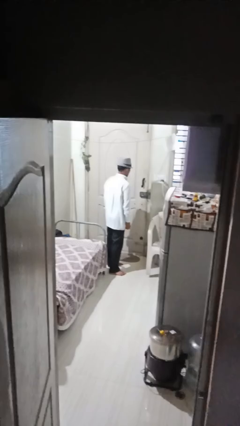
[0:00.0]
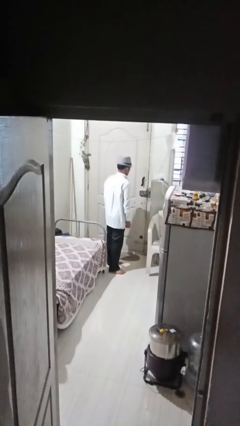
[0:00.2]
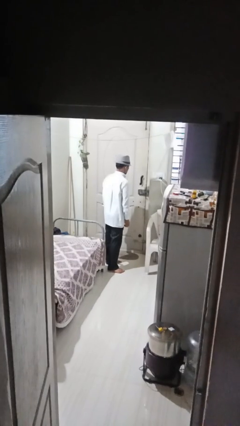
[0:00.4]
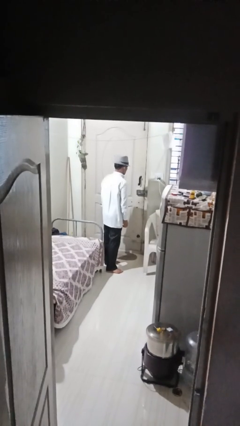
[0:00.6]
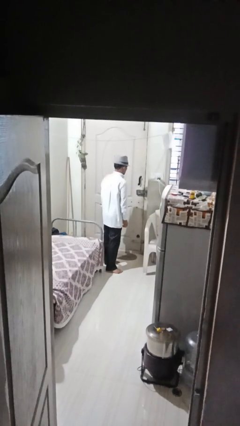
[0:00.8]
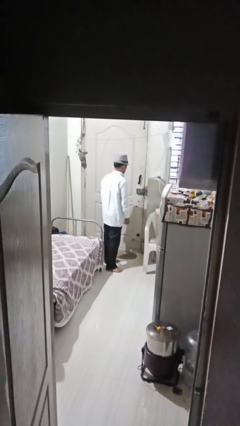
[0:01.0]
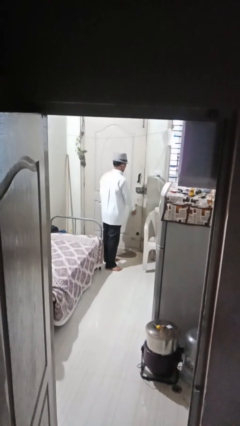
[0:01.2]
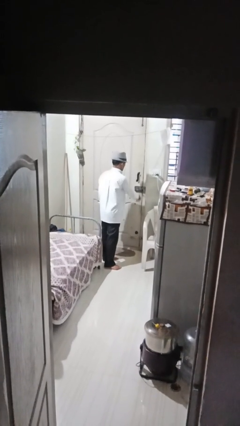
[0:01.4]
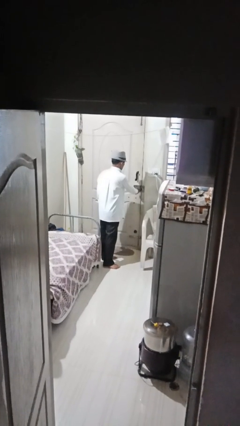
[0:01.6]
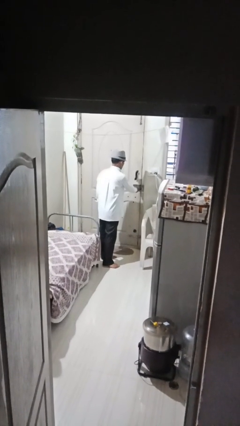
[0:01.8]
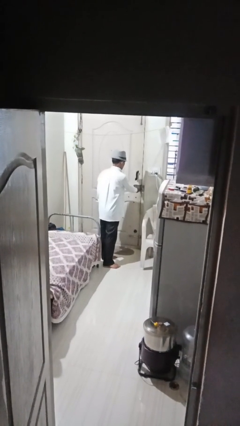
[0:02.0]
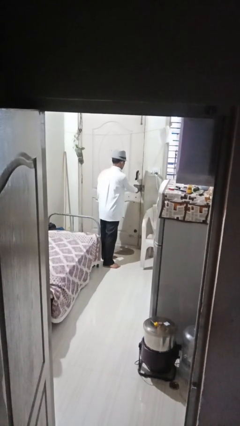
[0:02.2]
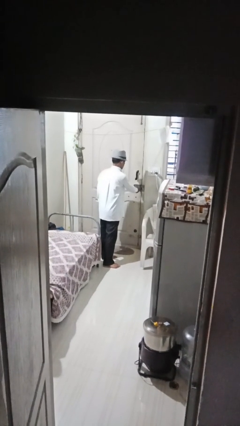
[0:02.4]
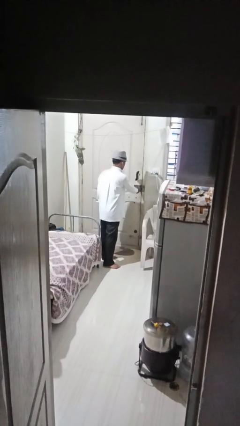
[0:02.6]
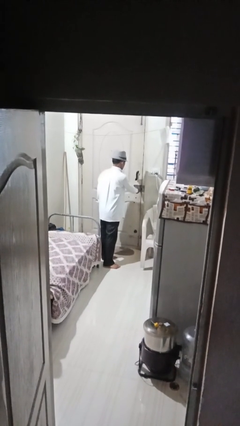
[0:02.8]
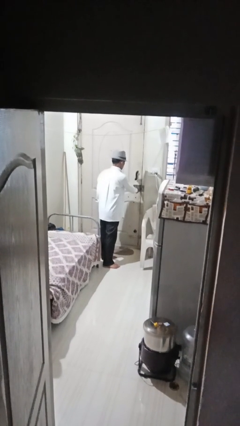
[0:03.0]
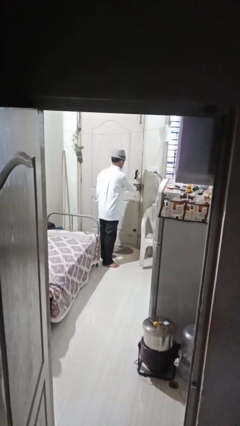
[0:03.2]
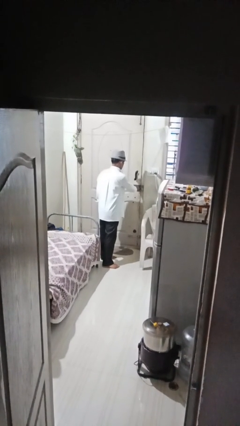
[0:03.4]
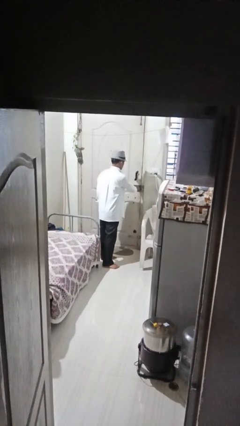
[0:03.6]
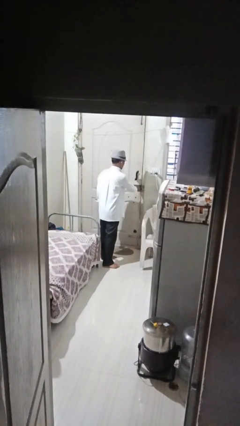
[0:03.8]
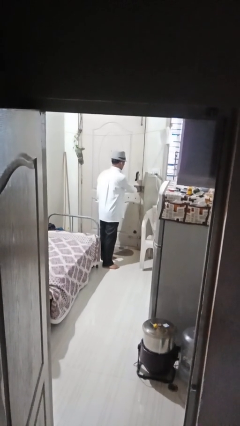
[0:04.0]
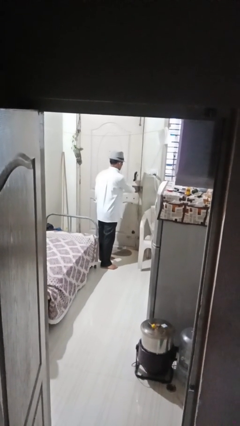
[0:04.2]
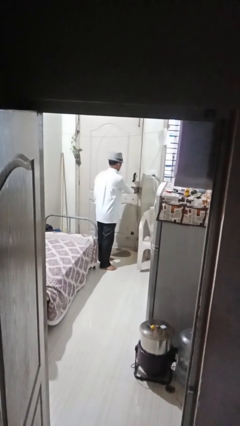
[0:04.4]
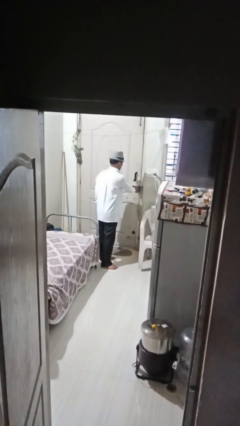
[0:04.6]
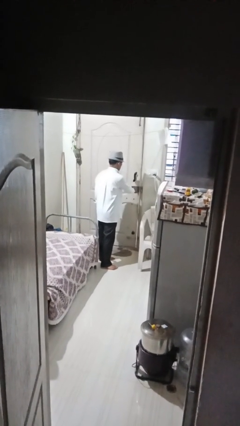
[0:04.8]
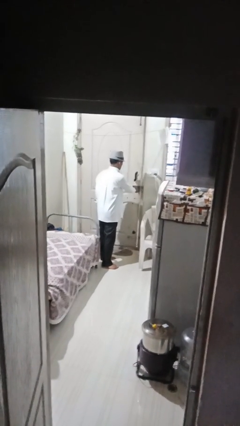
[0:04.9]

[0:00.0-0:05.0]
person unlocks door with keys

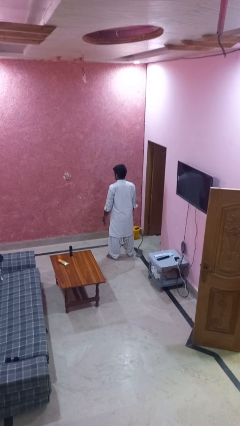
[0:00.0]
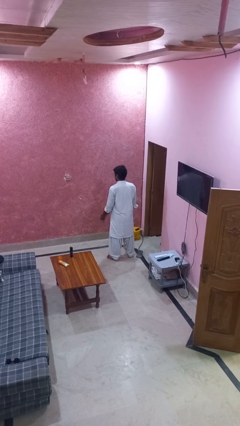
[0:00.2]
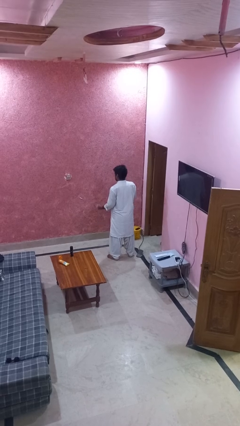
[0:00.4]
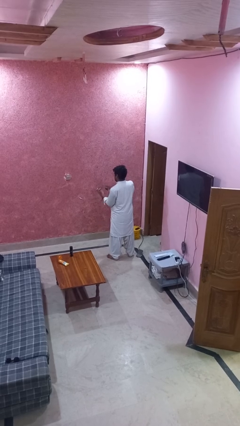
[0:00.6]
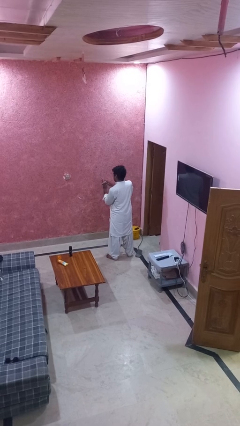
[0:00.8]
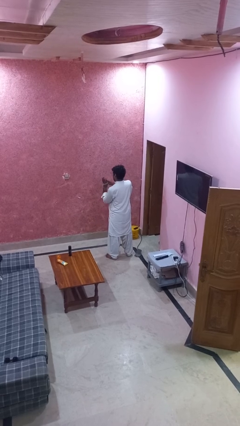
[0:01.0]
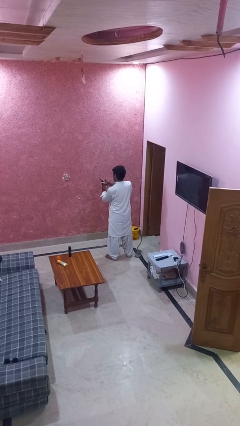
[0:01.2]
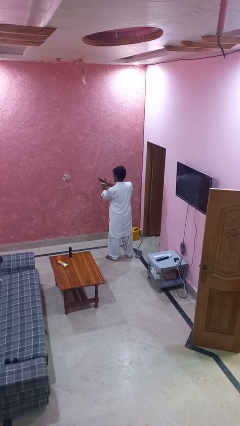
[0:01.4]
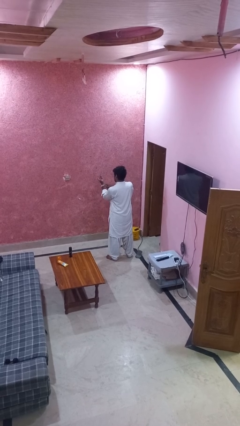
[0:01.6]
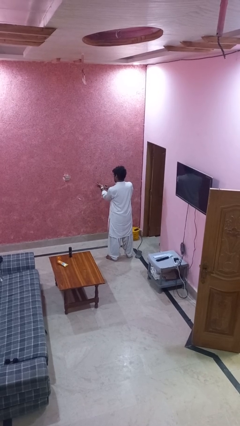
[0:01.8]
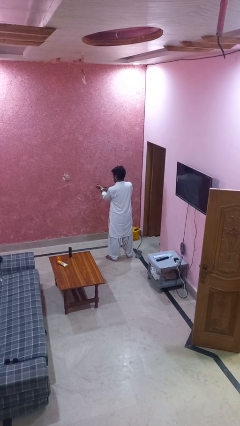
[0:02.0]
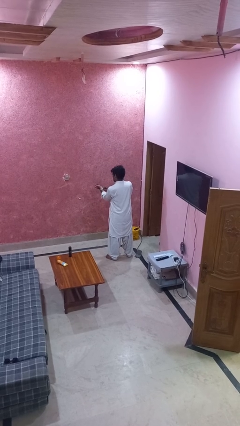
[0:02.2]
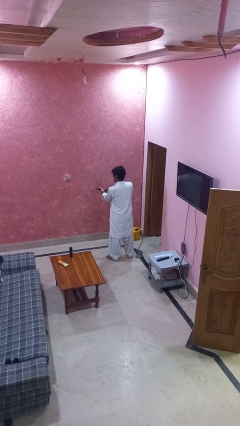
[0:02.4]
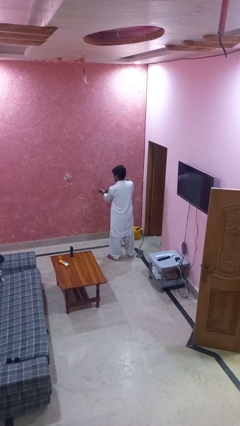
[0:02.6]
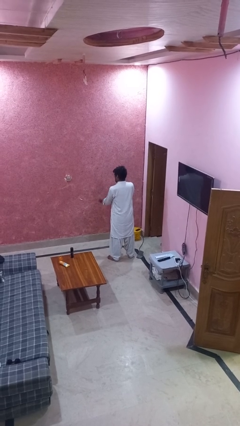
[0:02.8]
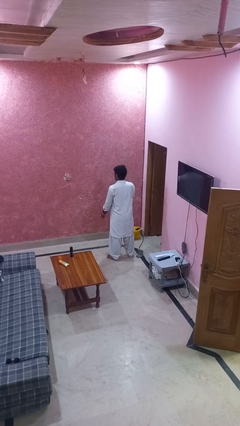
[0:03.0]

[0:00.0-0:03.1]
person puts on wristwatch

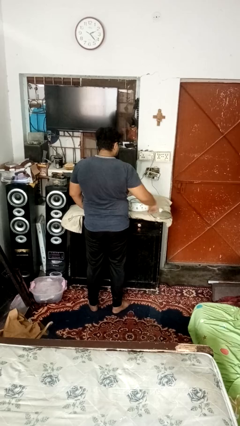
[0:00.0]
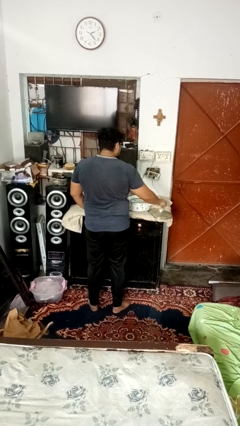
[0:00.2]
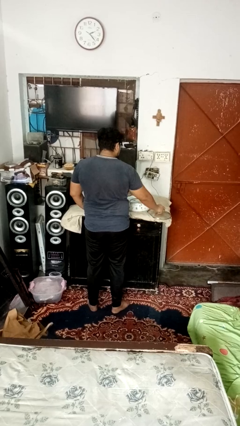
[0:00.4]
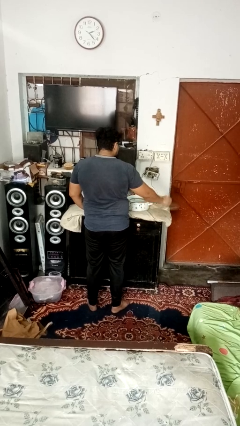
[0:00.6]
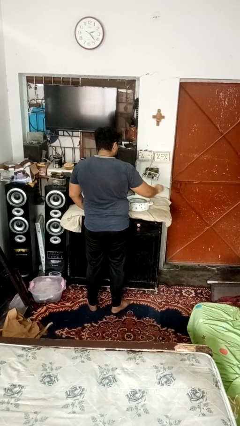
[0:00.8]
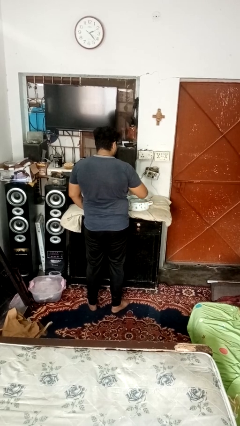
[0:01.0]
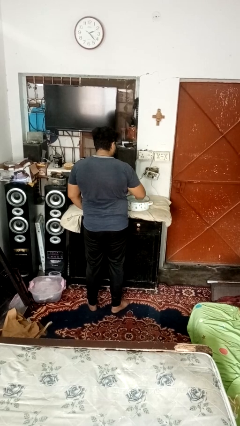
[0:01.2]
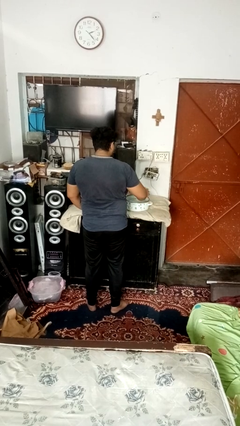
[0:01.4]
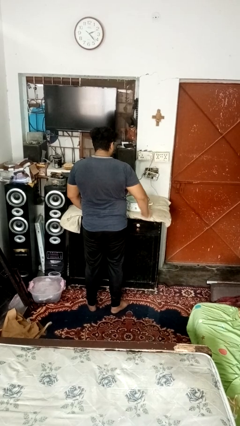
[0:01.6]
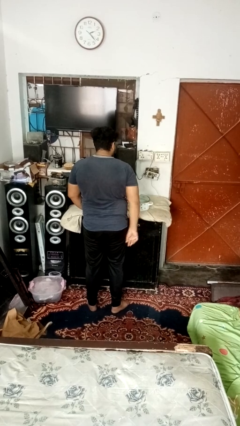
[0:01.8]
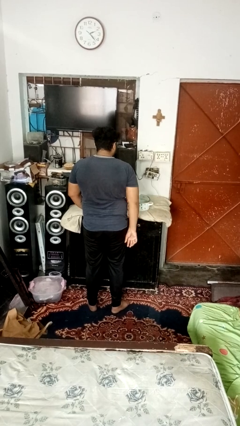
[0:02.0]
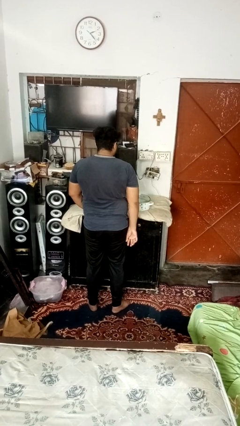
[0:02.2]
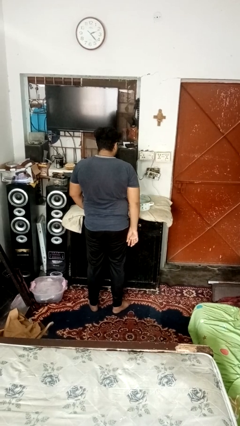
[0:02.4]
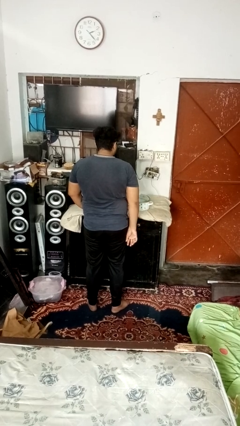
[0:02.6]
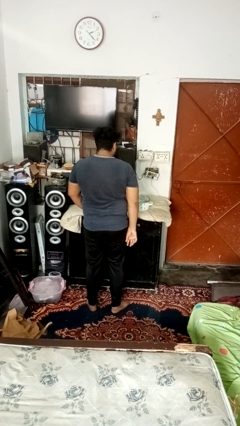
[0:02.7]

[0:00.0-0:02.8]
person closes jar

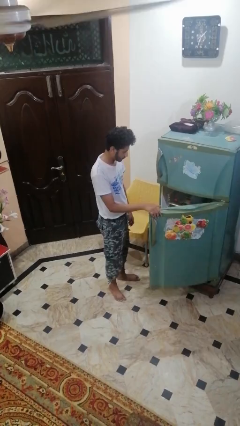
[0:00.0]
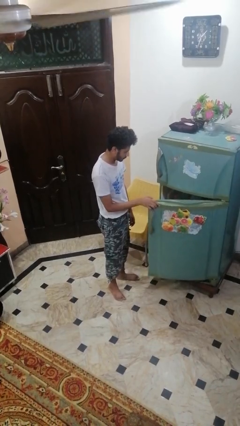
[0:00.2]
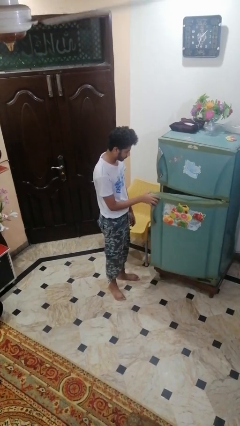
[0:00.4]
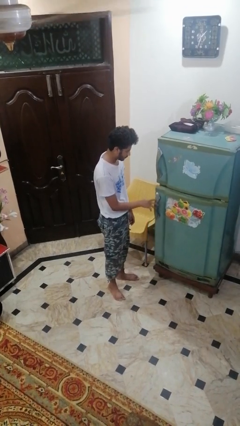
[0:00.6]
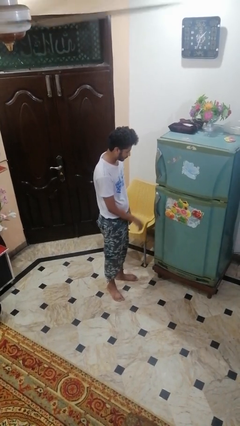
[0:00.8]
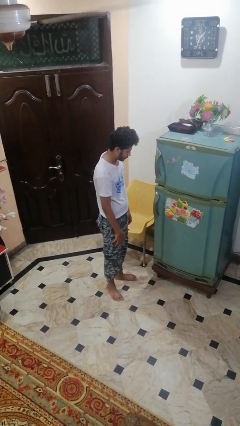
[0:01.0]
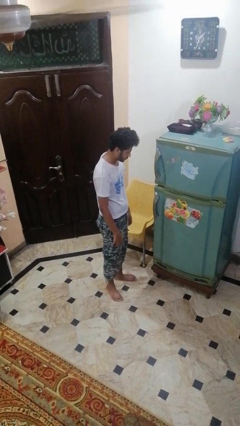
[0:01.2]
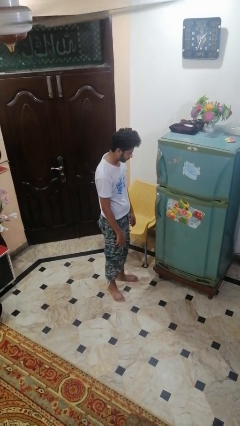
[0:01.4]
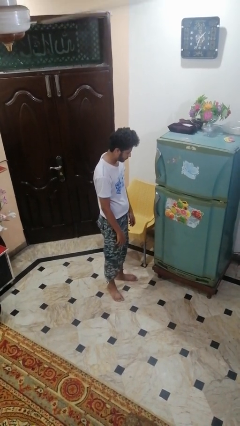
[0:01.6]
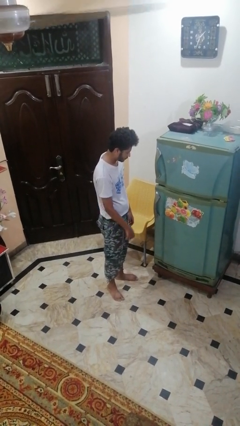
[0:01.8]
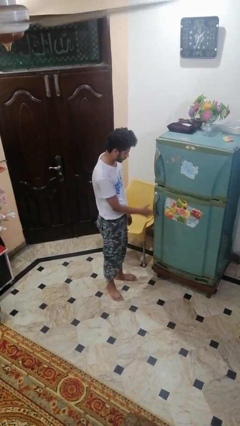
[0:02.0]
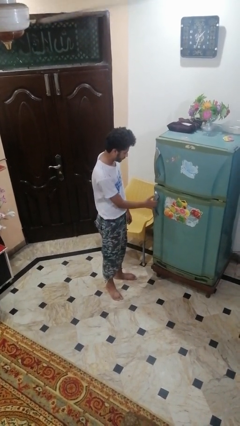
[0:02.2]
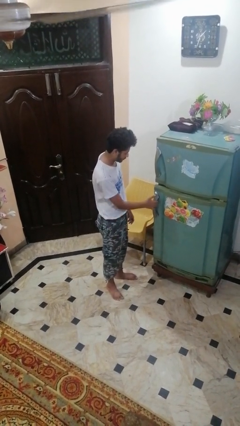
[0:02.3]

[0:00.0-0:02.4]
person closes refrigerator

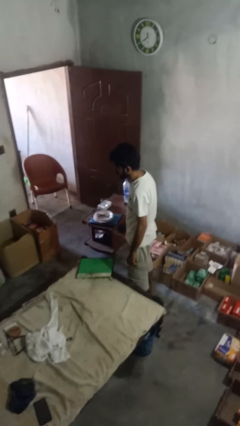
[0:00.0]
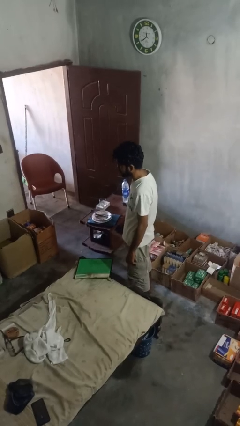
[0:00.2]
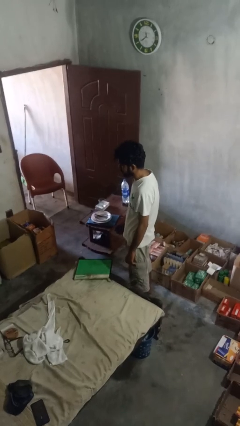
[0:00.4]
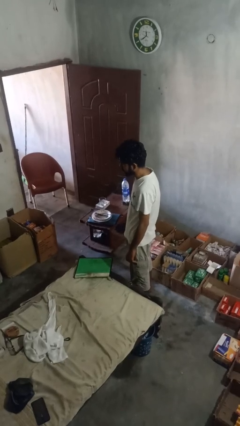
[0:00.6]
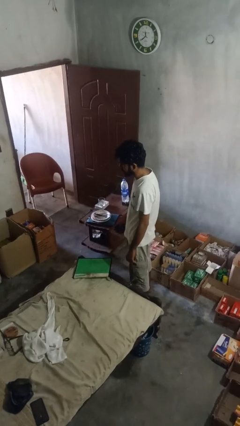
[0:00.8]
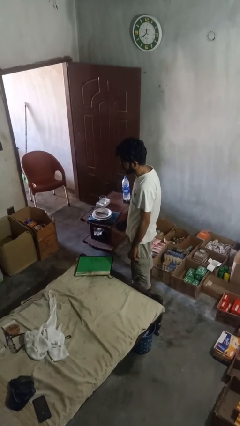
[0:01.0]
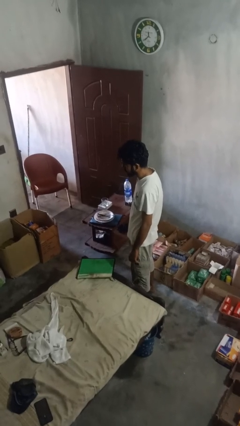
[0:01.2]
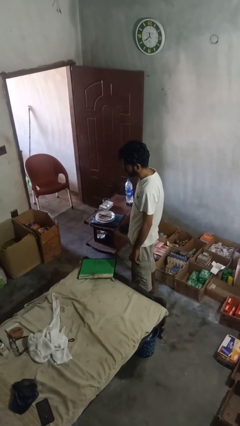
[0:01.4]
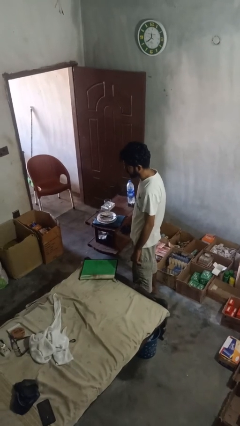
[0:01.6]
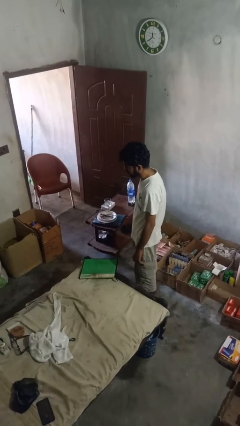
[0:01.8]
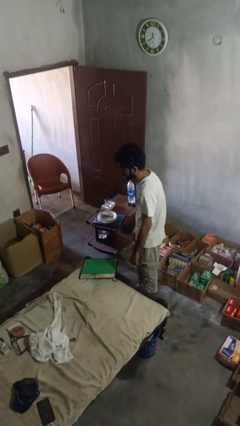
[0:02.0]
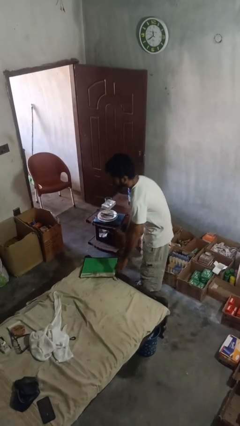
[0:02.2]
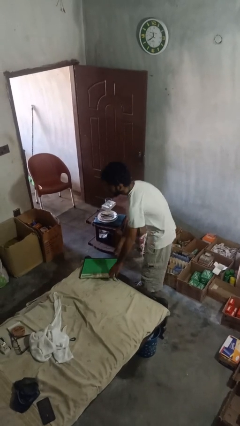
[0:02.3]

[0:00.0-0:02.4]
person picks up object from bed

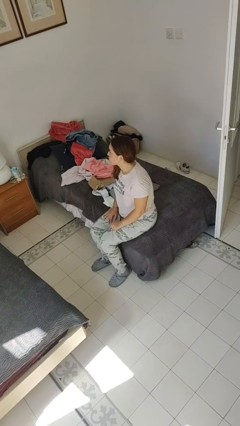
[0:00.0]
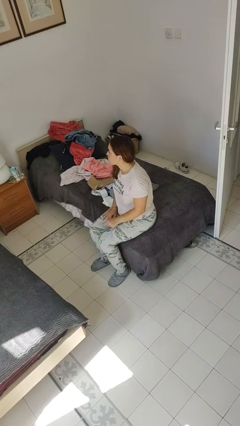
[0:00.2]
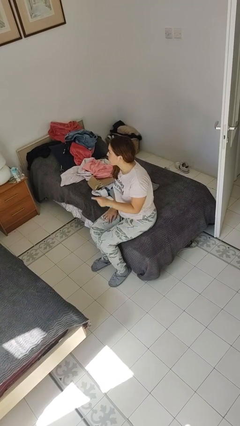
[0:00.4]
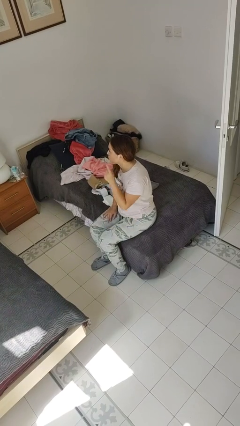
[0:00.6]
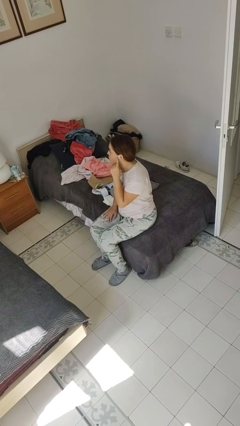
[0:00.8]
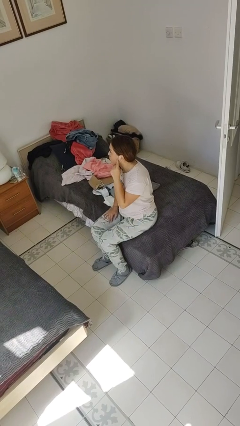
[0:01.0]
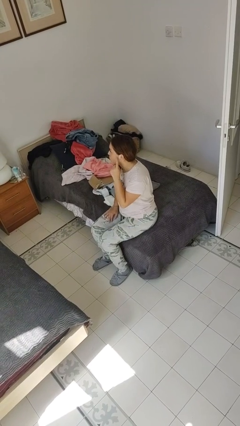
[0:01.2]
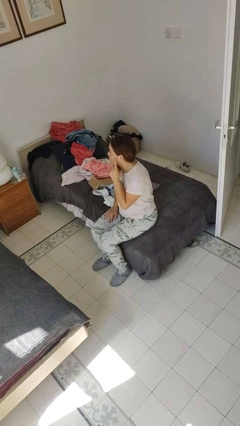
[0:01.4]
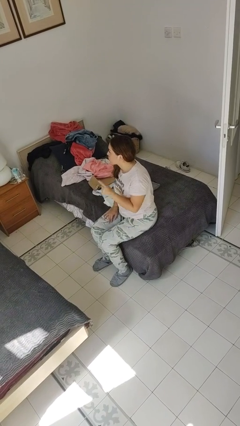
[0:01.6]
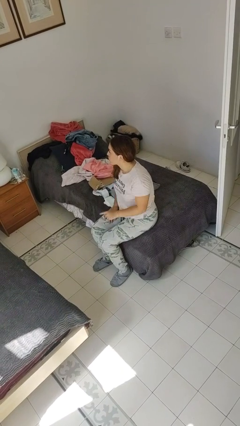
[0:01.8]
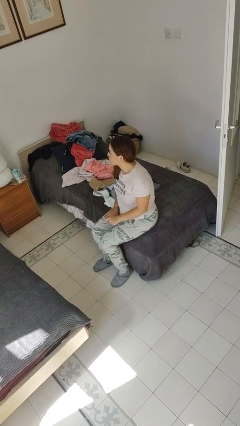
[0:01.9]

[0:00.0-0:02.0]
person gestures listen closely
